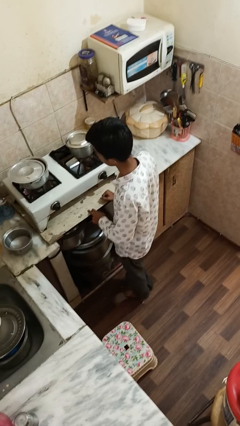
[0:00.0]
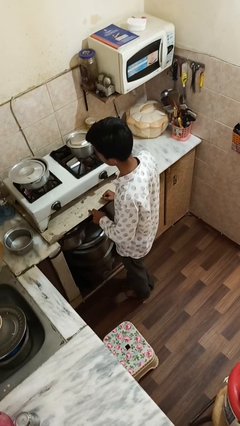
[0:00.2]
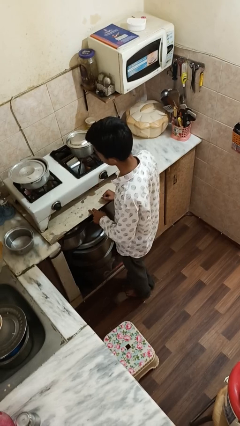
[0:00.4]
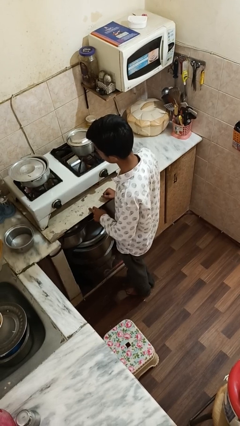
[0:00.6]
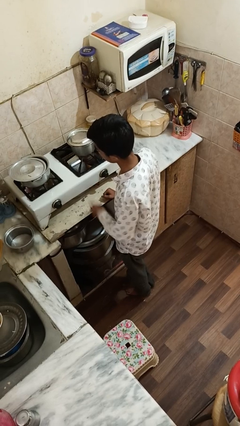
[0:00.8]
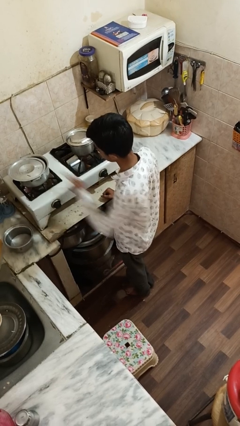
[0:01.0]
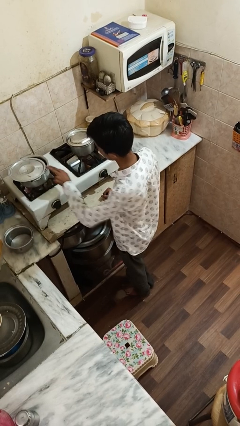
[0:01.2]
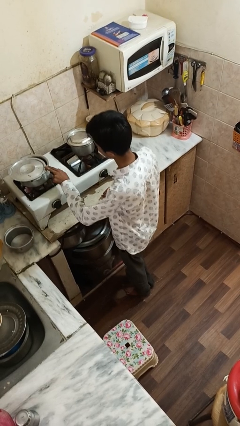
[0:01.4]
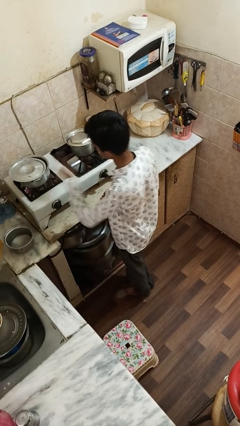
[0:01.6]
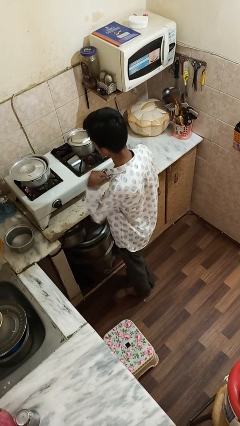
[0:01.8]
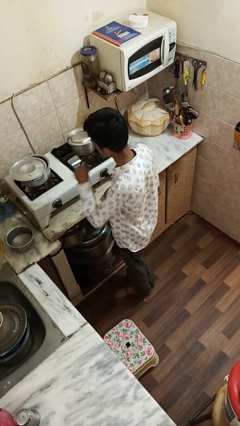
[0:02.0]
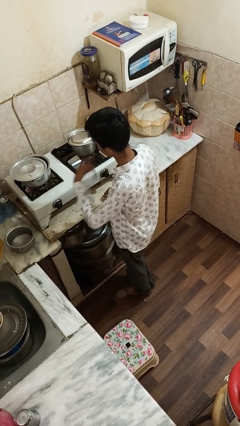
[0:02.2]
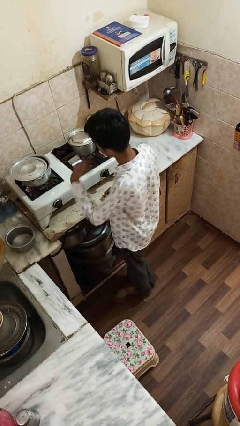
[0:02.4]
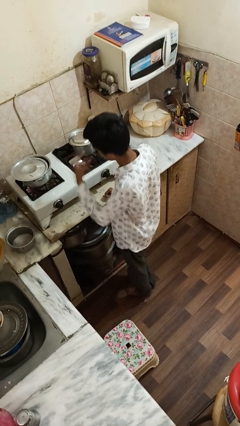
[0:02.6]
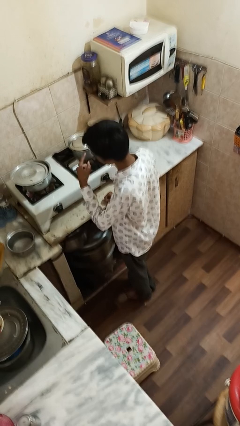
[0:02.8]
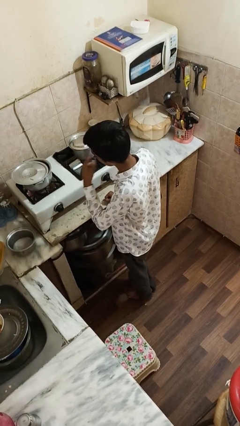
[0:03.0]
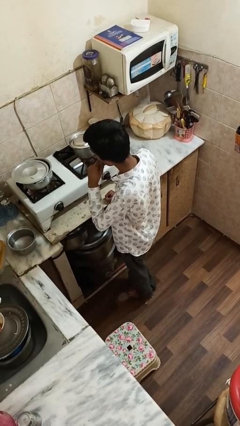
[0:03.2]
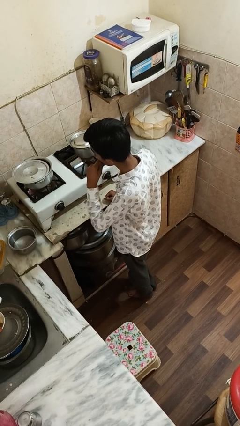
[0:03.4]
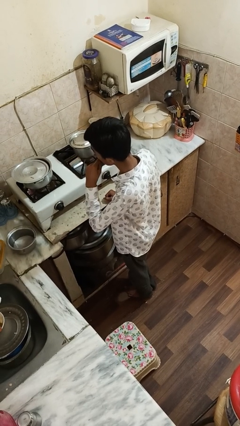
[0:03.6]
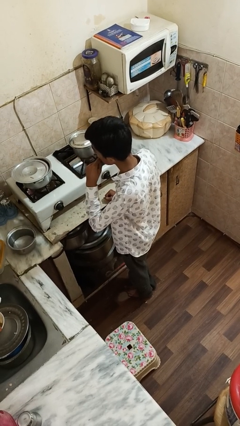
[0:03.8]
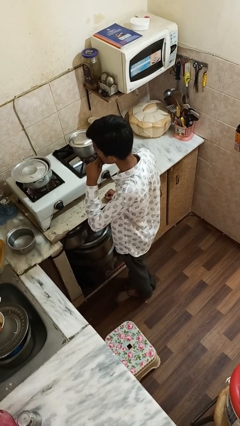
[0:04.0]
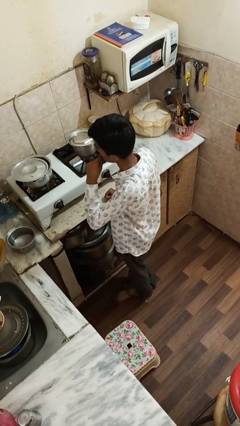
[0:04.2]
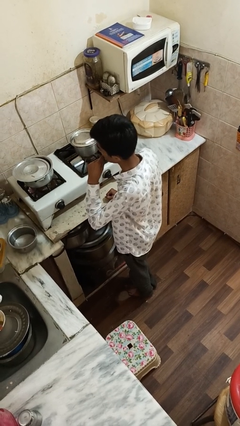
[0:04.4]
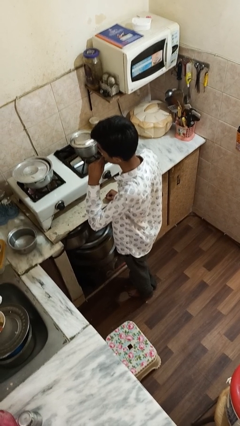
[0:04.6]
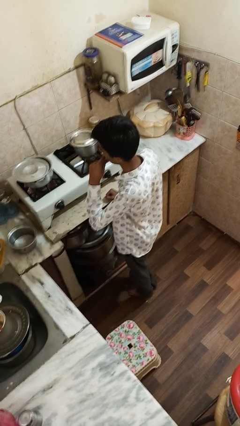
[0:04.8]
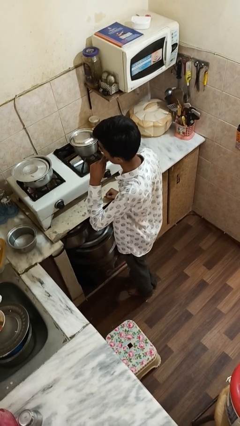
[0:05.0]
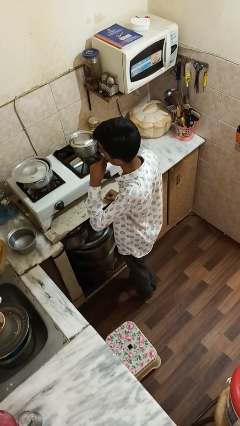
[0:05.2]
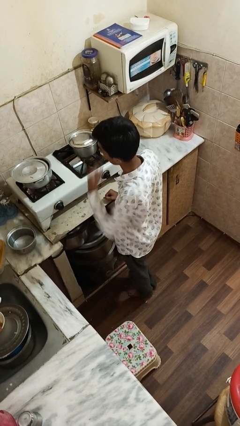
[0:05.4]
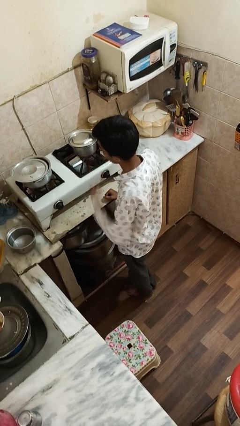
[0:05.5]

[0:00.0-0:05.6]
person burns hand

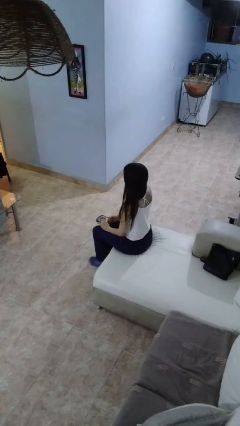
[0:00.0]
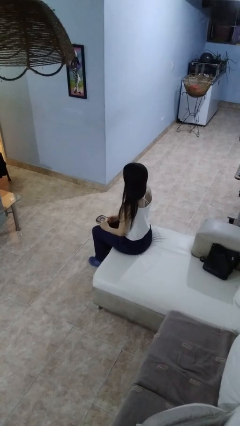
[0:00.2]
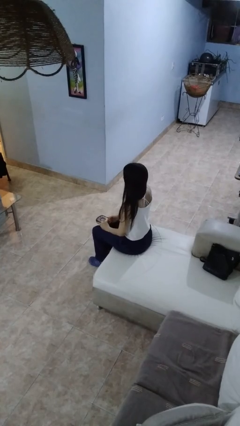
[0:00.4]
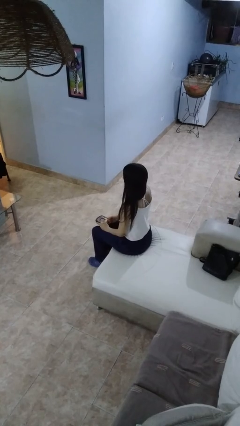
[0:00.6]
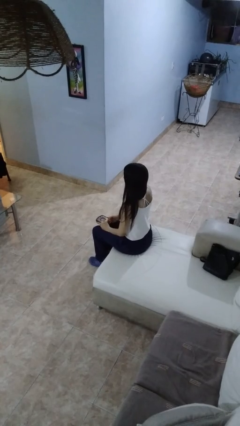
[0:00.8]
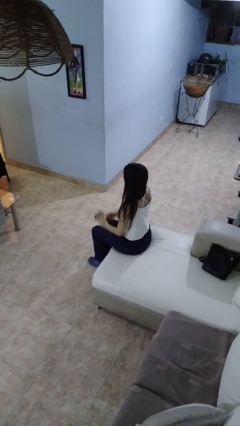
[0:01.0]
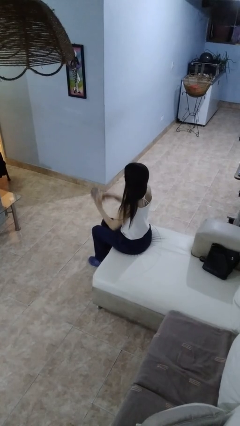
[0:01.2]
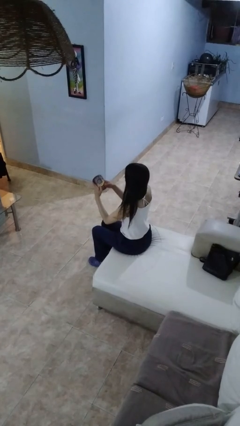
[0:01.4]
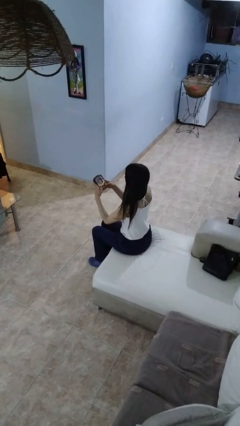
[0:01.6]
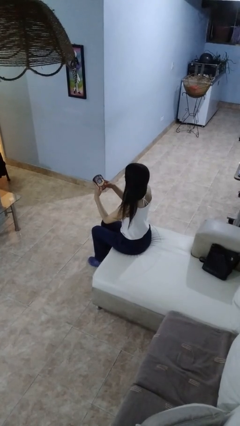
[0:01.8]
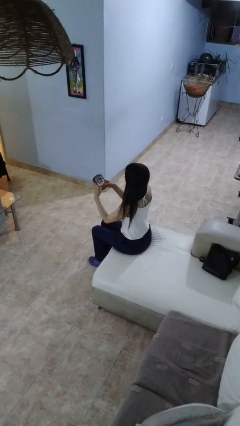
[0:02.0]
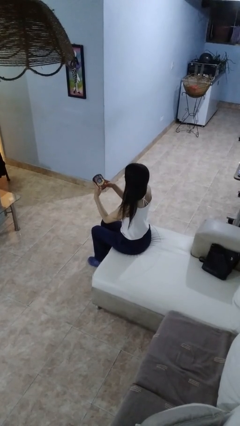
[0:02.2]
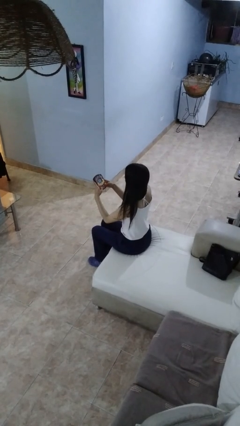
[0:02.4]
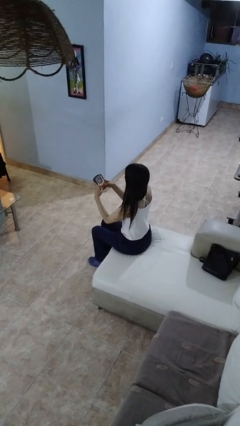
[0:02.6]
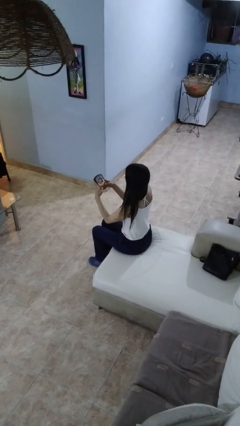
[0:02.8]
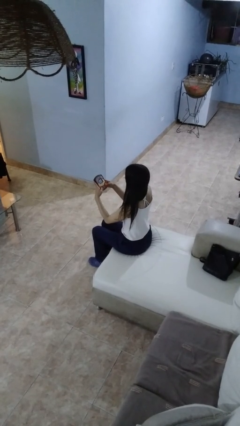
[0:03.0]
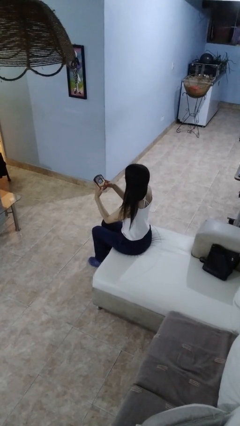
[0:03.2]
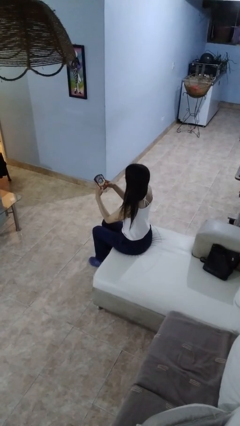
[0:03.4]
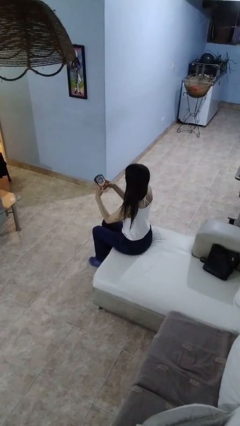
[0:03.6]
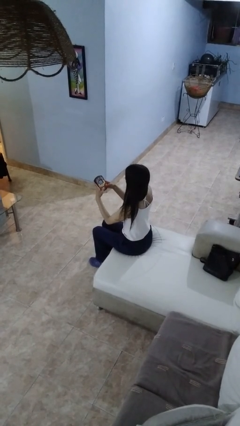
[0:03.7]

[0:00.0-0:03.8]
person interacts with handheld game

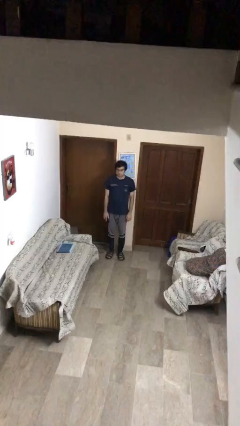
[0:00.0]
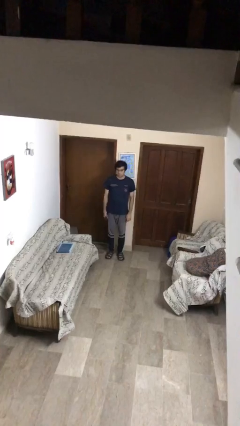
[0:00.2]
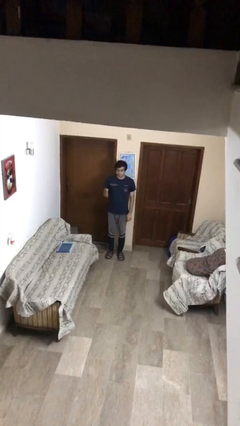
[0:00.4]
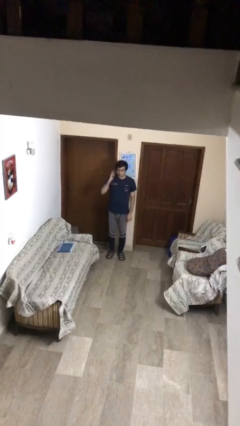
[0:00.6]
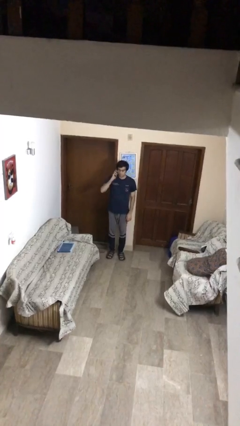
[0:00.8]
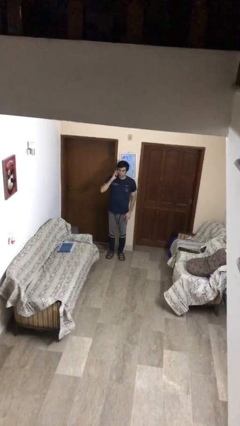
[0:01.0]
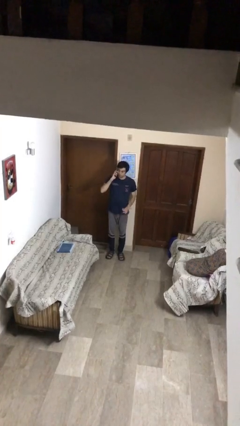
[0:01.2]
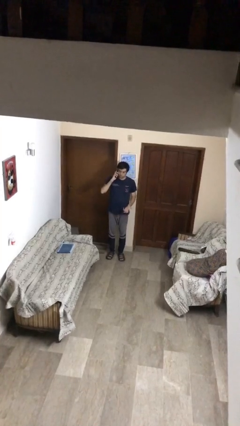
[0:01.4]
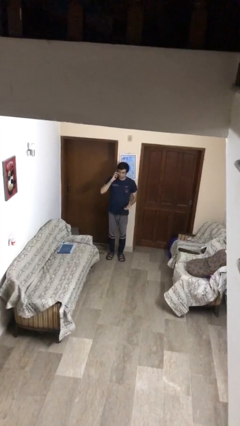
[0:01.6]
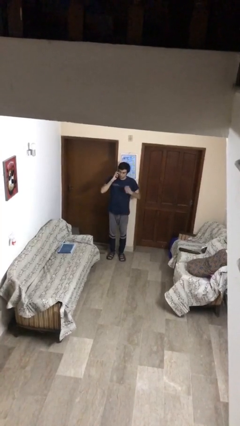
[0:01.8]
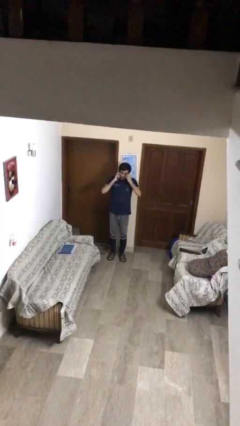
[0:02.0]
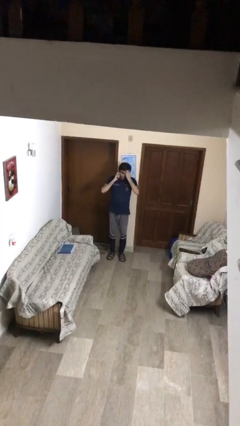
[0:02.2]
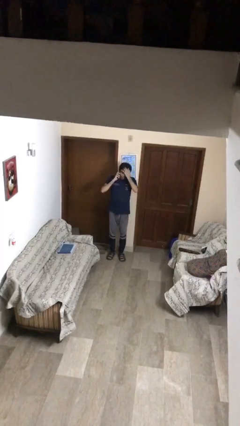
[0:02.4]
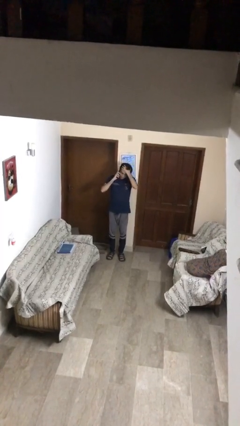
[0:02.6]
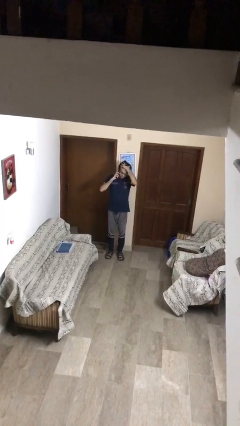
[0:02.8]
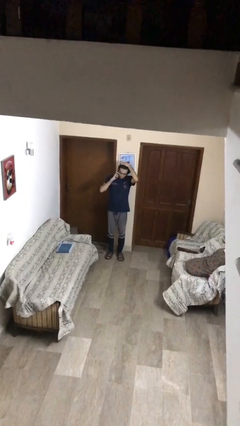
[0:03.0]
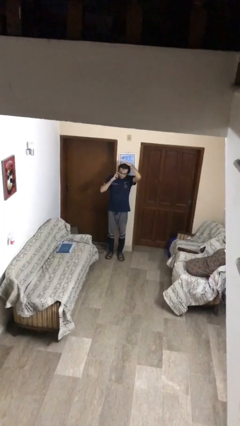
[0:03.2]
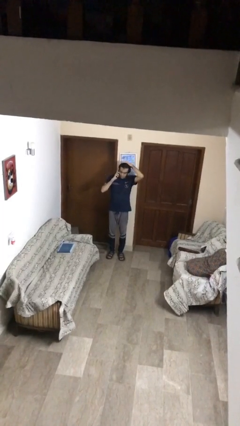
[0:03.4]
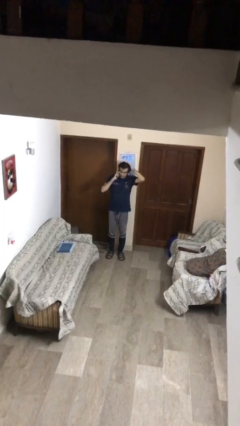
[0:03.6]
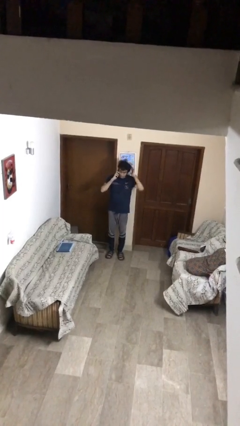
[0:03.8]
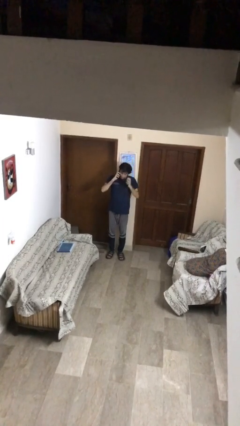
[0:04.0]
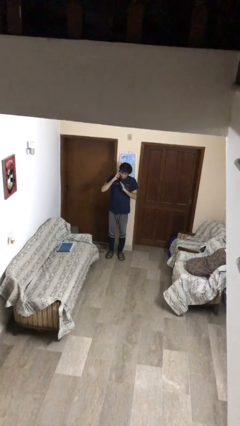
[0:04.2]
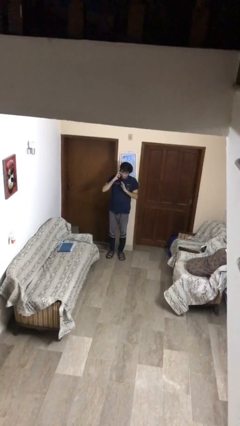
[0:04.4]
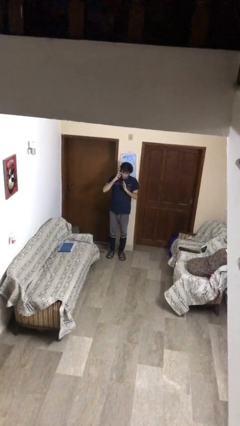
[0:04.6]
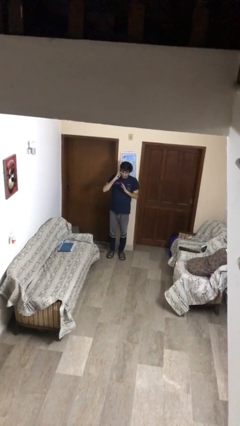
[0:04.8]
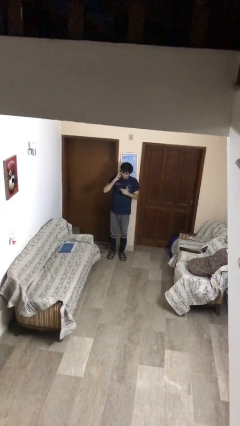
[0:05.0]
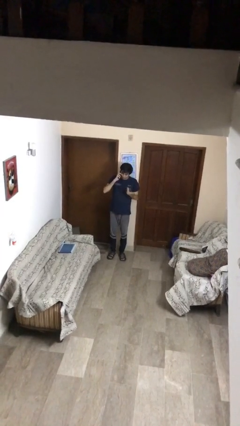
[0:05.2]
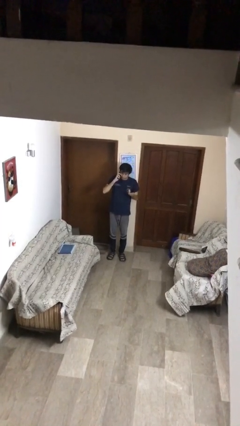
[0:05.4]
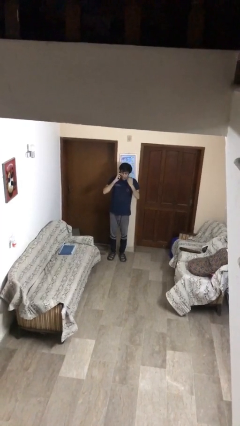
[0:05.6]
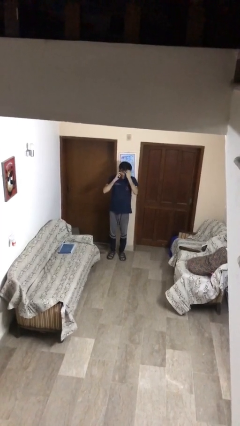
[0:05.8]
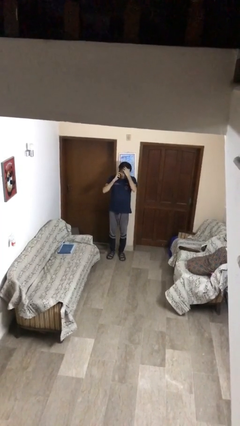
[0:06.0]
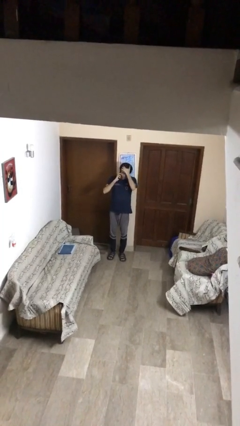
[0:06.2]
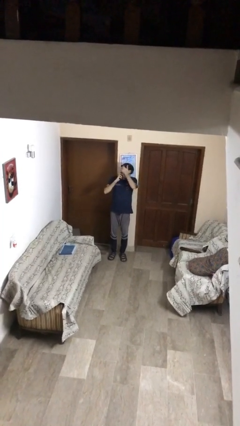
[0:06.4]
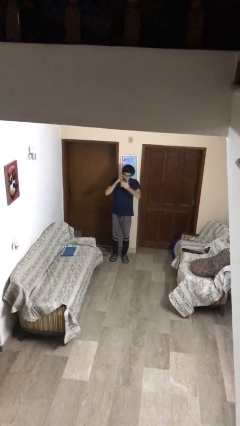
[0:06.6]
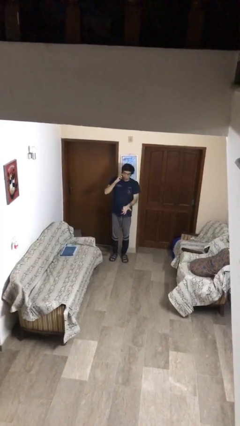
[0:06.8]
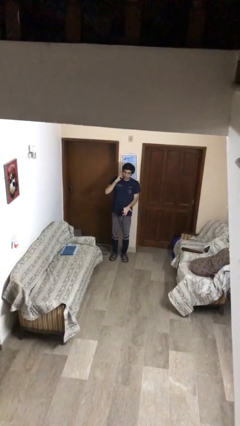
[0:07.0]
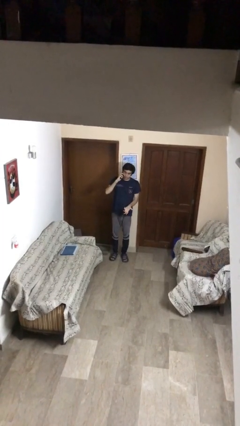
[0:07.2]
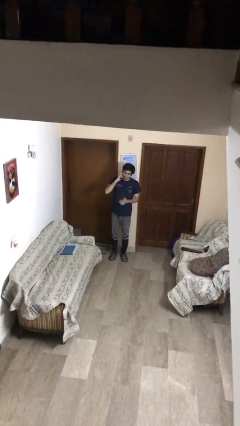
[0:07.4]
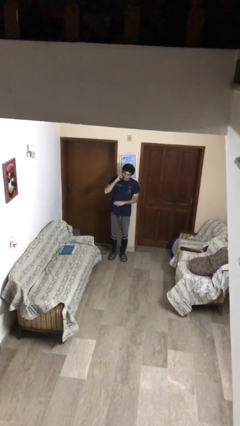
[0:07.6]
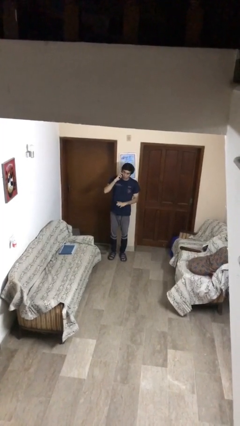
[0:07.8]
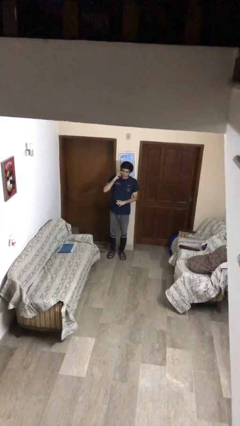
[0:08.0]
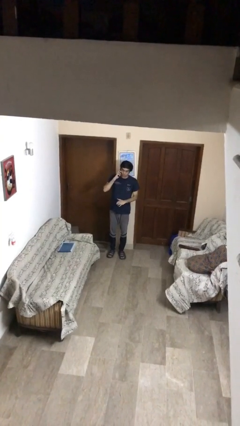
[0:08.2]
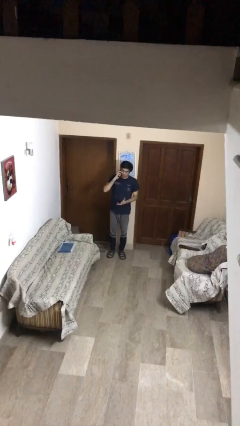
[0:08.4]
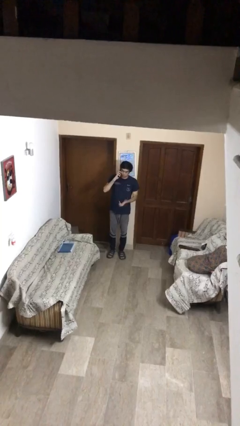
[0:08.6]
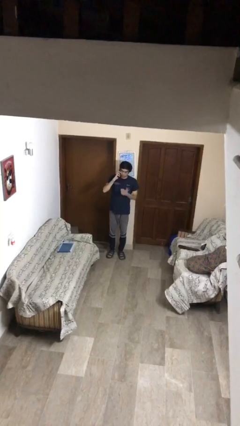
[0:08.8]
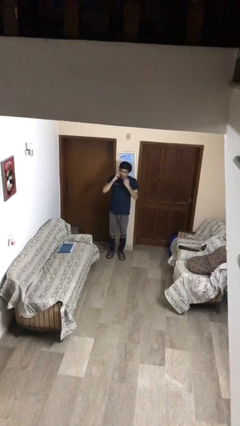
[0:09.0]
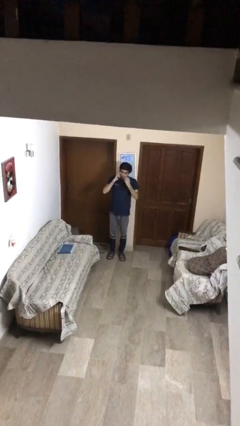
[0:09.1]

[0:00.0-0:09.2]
person talks on phone
